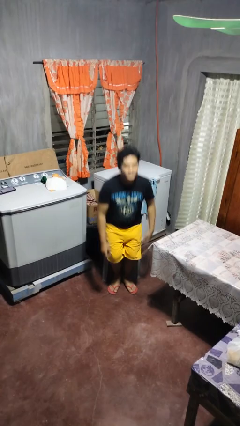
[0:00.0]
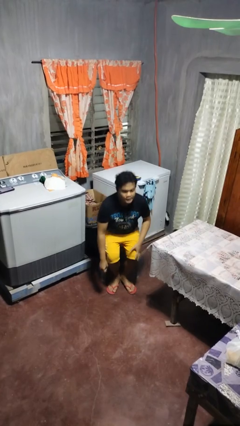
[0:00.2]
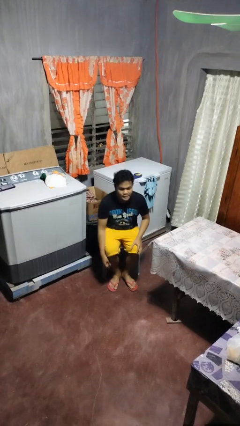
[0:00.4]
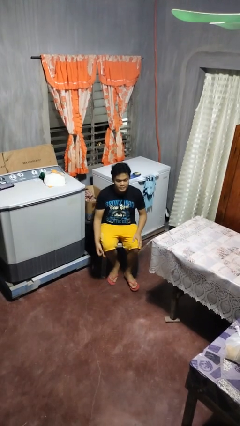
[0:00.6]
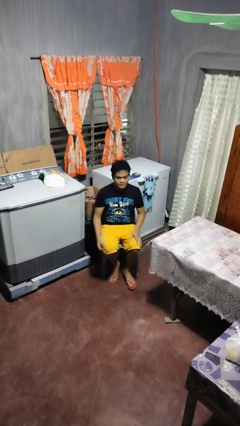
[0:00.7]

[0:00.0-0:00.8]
person sits down

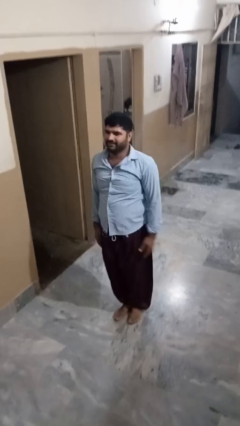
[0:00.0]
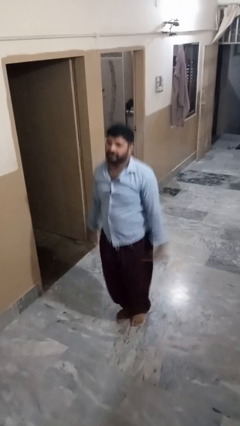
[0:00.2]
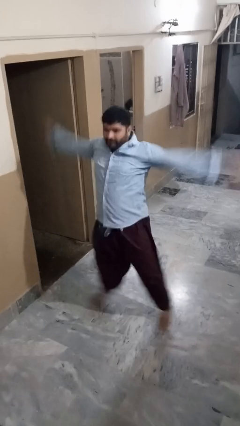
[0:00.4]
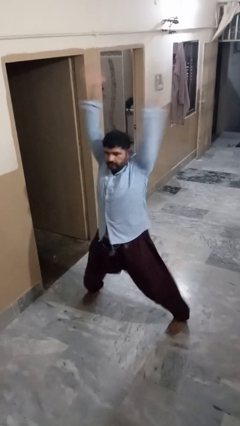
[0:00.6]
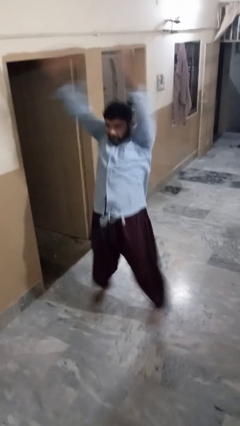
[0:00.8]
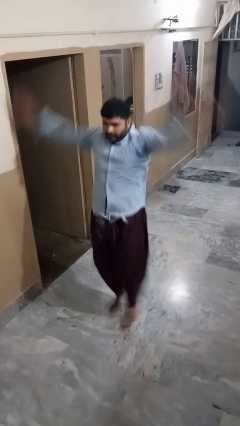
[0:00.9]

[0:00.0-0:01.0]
person exercises with jumping jacks

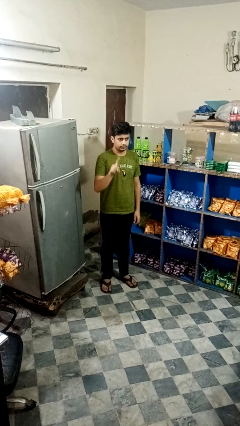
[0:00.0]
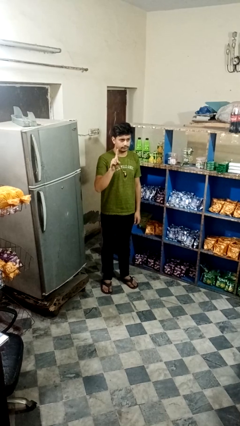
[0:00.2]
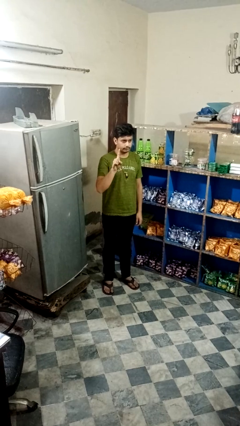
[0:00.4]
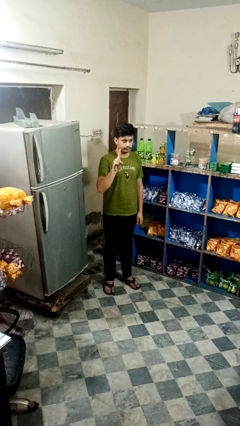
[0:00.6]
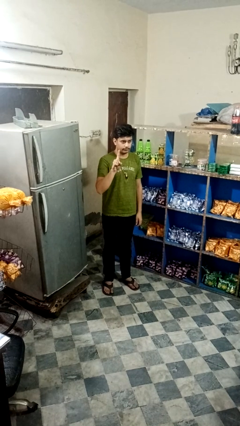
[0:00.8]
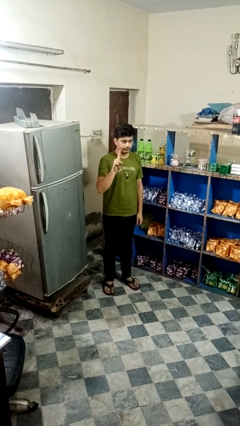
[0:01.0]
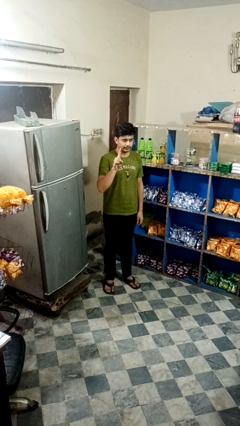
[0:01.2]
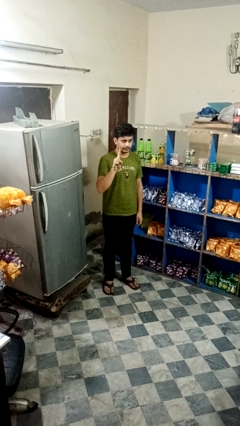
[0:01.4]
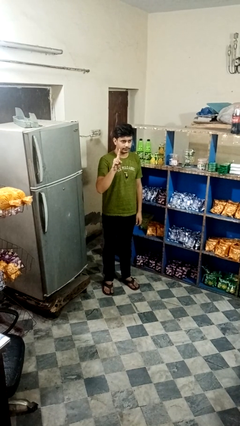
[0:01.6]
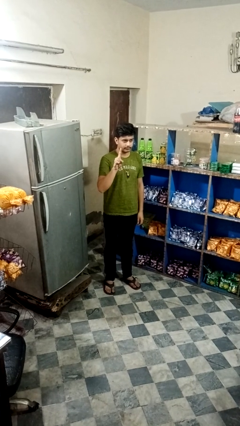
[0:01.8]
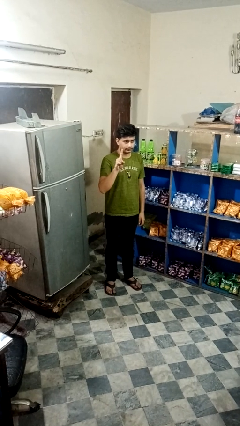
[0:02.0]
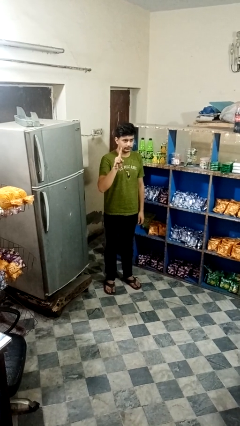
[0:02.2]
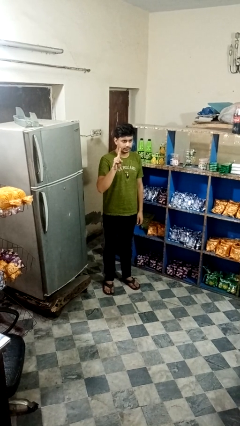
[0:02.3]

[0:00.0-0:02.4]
person gestures number one

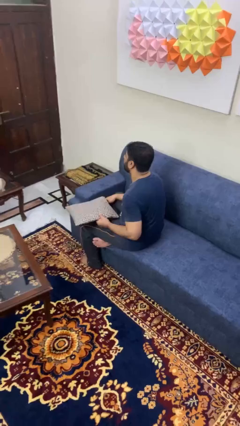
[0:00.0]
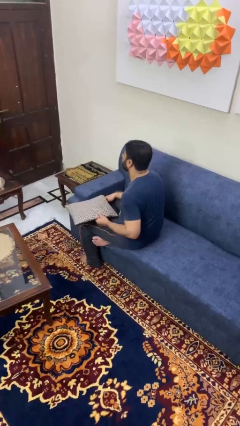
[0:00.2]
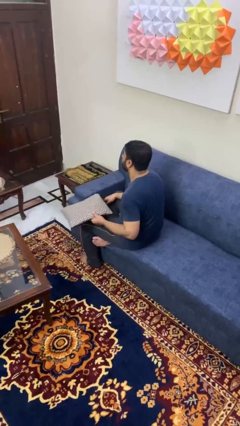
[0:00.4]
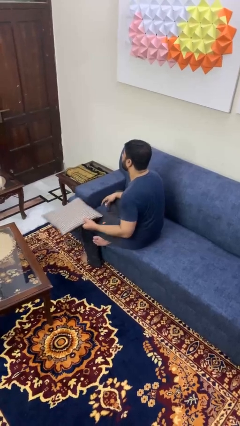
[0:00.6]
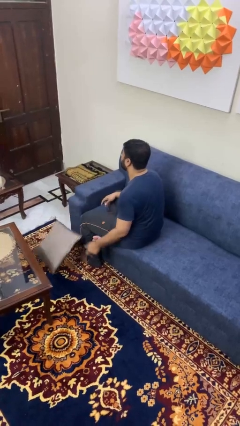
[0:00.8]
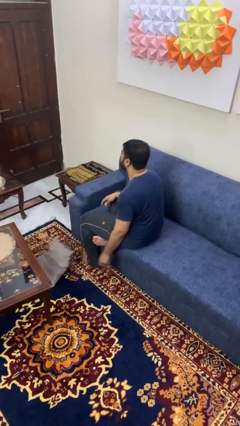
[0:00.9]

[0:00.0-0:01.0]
person throws object to ground

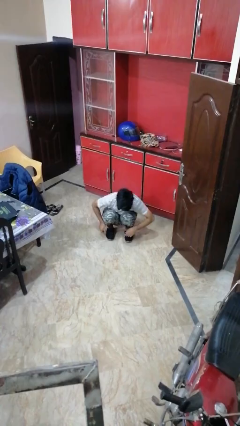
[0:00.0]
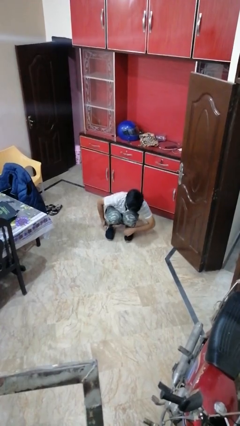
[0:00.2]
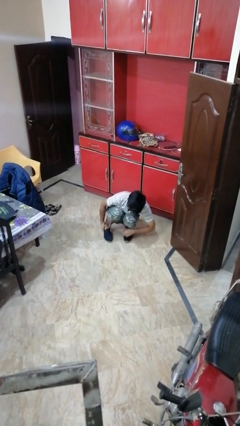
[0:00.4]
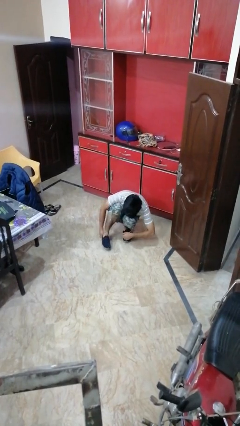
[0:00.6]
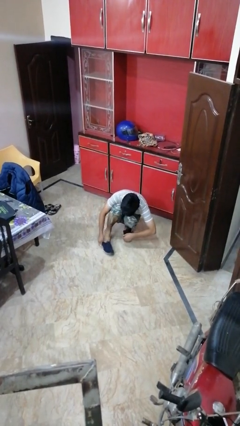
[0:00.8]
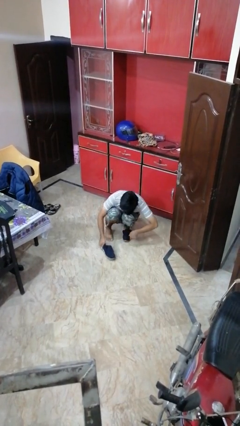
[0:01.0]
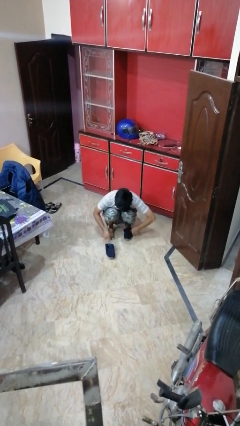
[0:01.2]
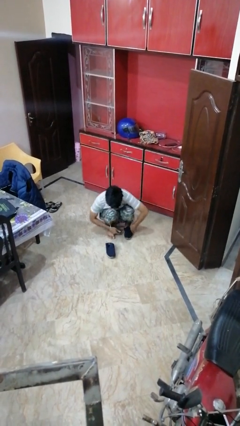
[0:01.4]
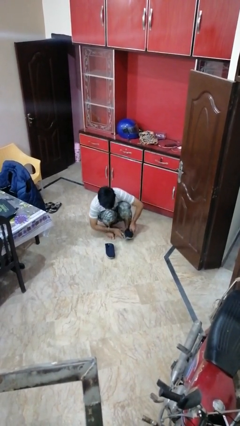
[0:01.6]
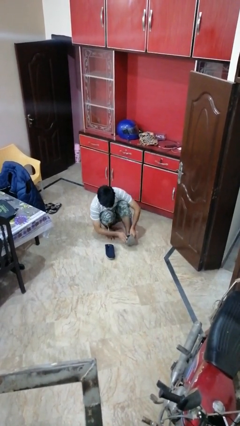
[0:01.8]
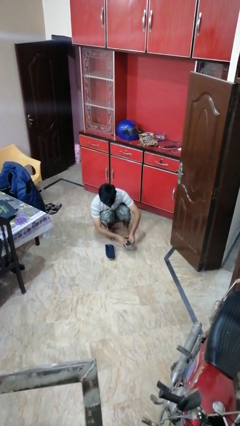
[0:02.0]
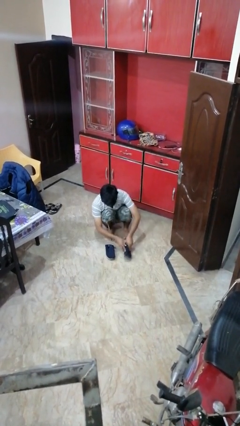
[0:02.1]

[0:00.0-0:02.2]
person takes off shoes

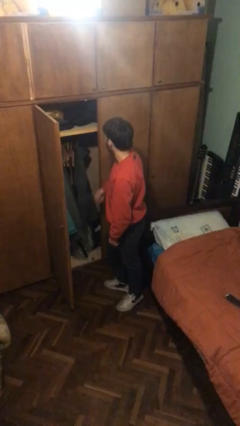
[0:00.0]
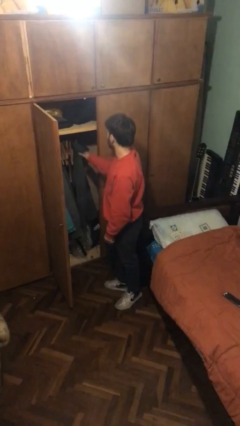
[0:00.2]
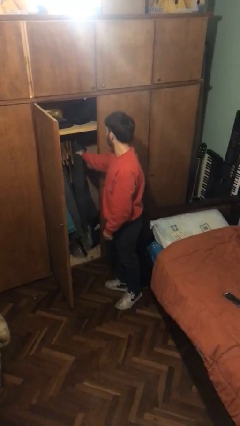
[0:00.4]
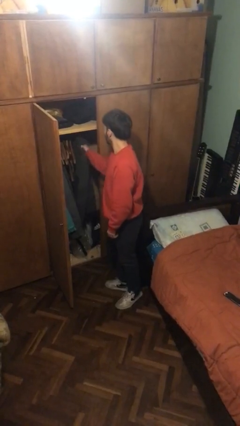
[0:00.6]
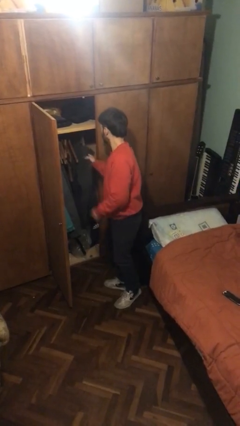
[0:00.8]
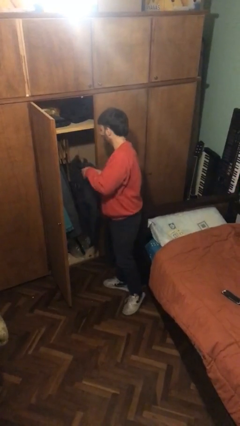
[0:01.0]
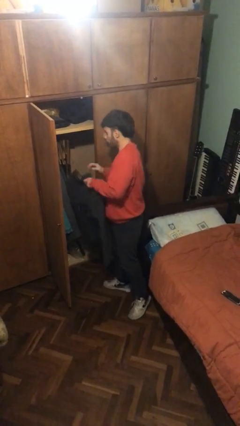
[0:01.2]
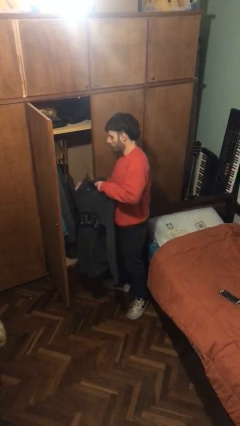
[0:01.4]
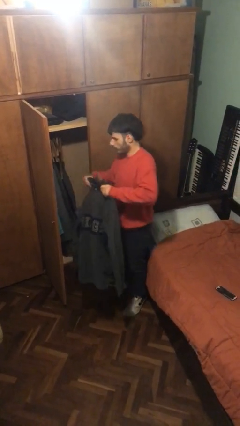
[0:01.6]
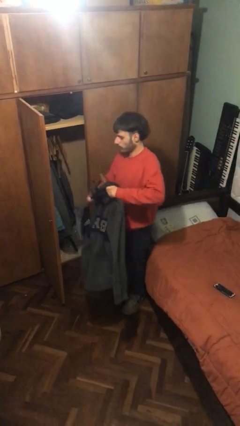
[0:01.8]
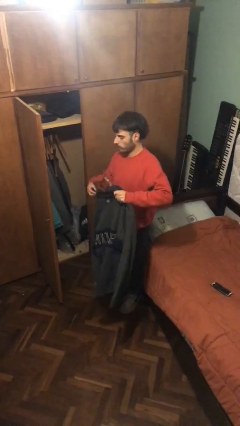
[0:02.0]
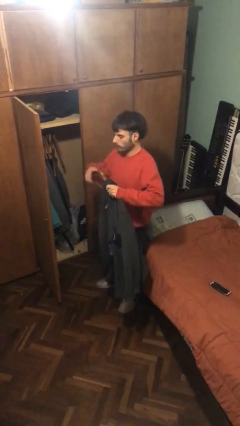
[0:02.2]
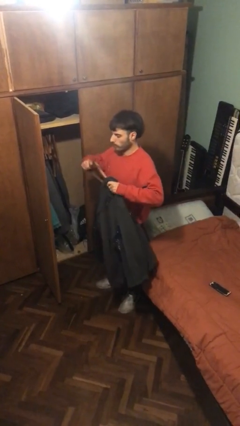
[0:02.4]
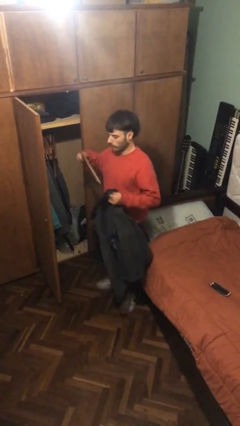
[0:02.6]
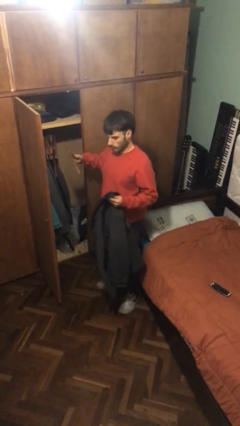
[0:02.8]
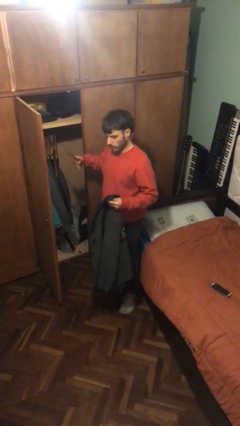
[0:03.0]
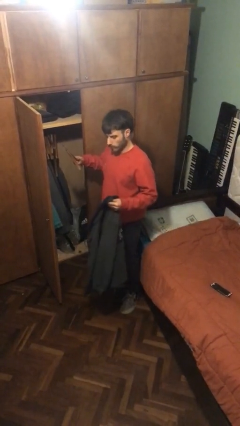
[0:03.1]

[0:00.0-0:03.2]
person takes clothes from closet

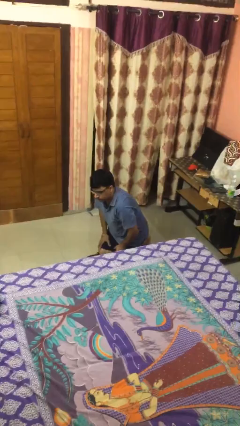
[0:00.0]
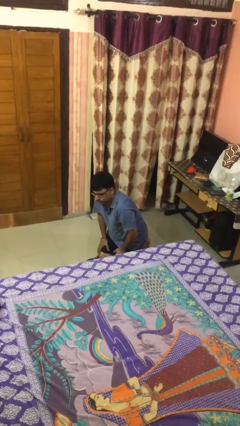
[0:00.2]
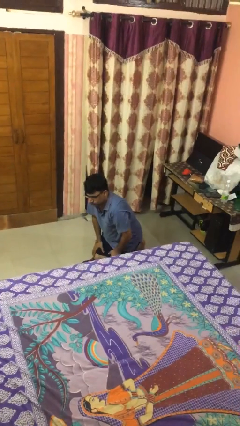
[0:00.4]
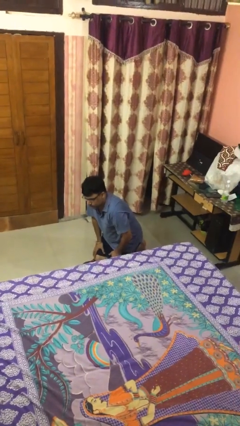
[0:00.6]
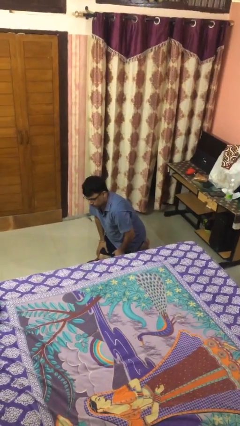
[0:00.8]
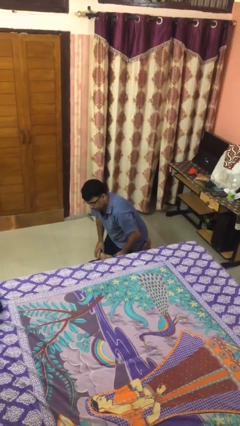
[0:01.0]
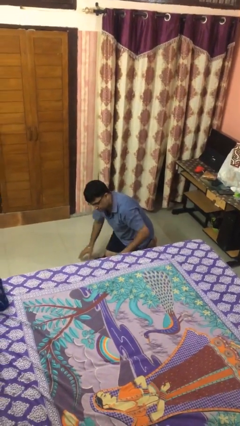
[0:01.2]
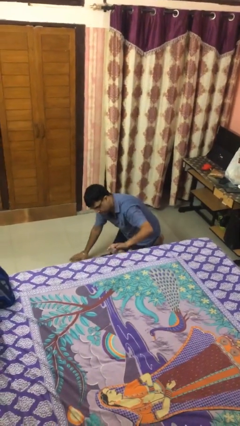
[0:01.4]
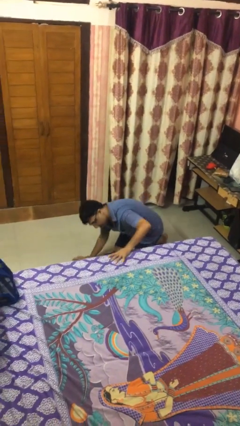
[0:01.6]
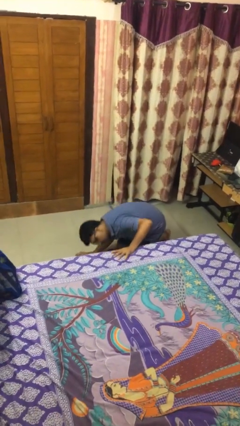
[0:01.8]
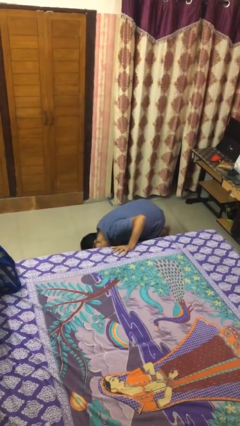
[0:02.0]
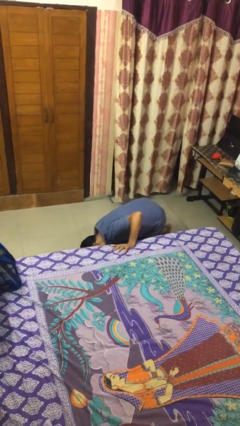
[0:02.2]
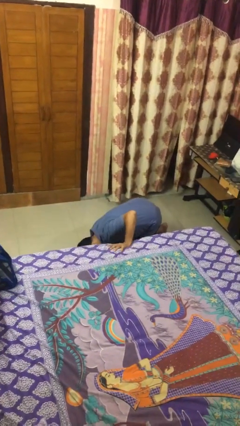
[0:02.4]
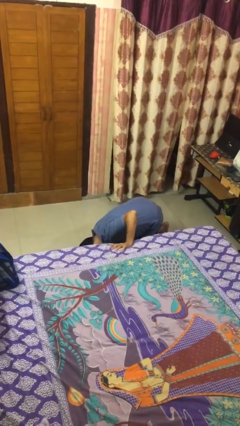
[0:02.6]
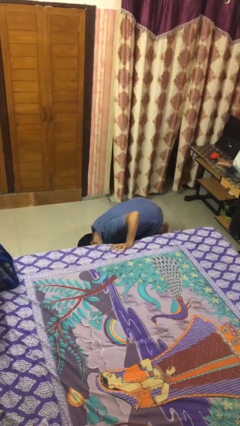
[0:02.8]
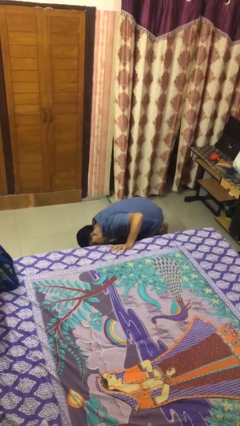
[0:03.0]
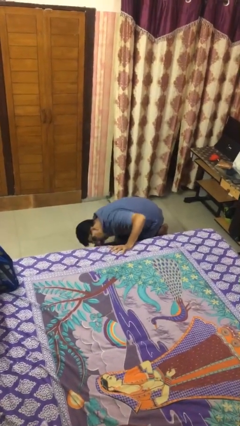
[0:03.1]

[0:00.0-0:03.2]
person searches under bed

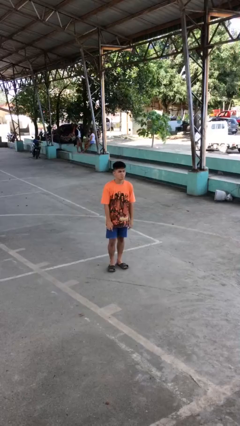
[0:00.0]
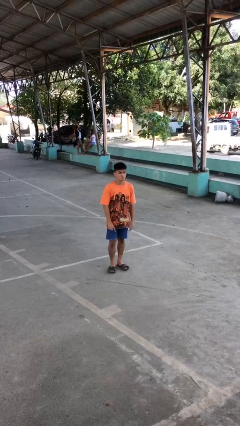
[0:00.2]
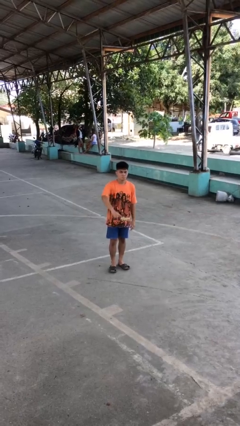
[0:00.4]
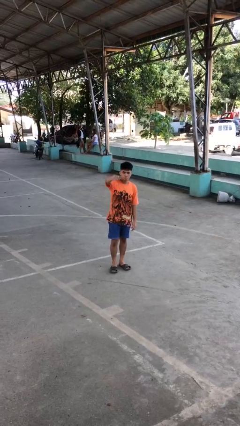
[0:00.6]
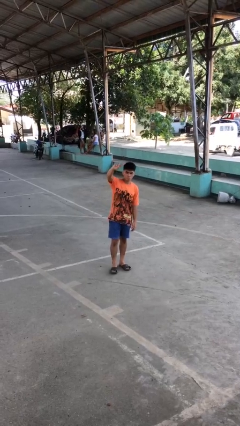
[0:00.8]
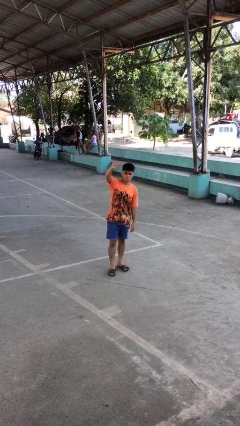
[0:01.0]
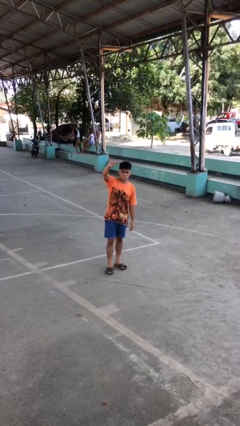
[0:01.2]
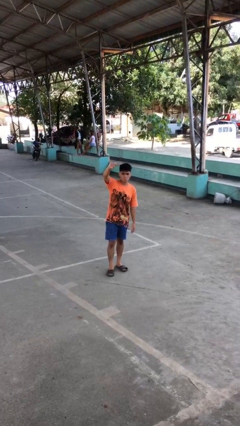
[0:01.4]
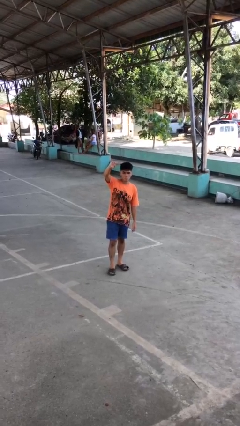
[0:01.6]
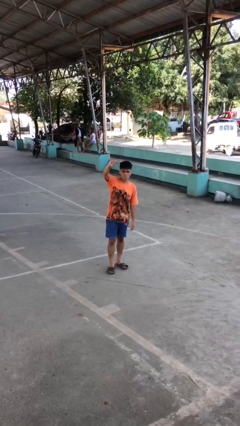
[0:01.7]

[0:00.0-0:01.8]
person gestures swipe up

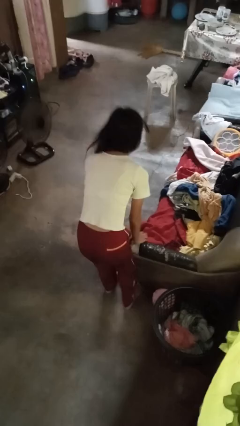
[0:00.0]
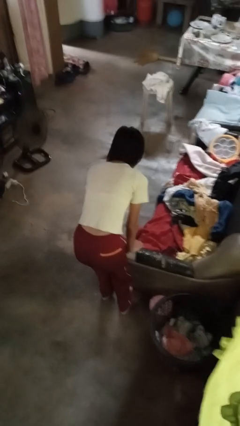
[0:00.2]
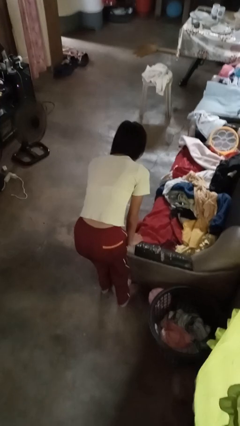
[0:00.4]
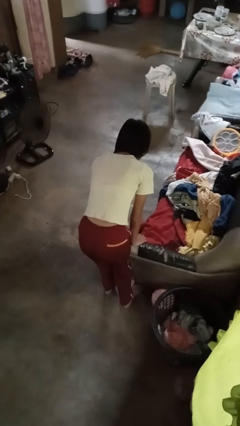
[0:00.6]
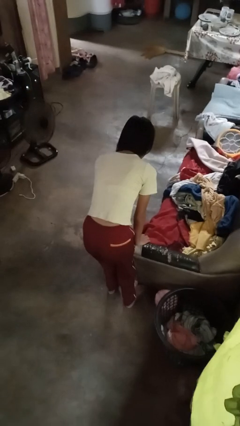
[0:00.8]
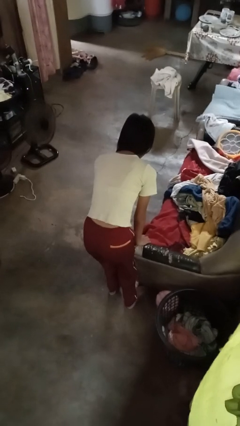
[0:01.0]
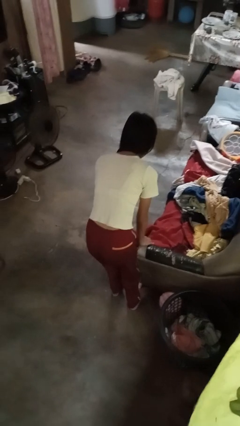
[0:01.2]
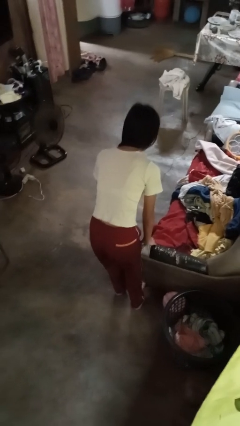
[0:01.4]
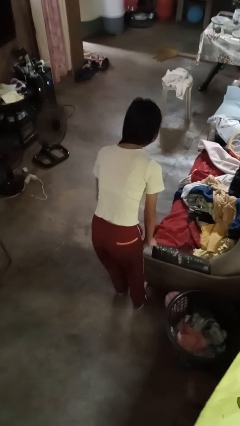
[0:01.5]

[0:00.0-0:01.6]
person stubs toe
